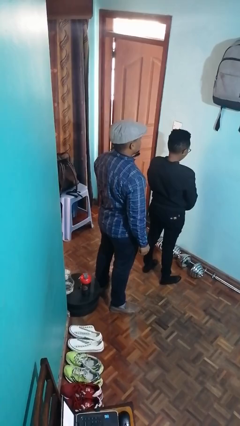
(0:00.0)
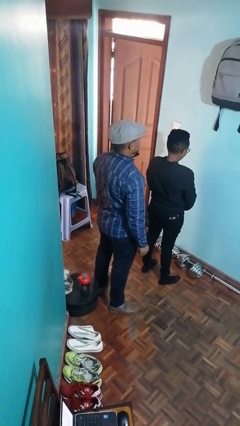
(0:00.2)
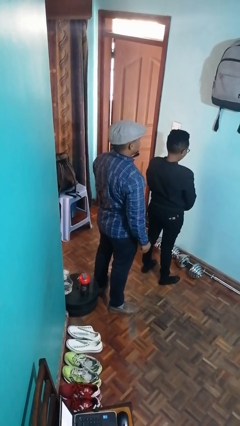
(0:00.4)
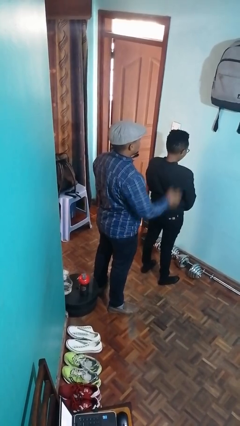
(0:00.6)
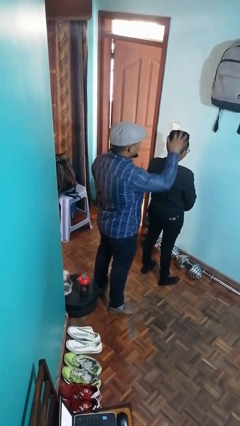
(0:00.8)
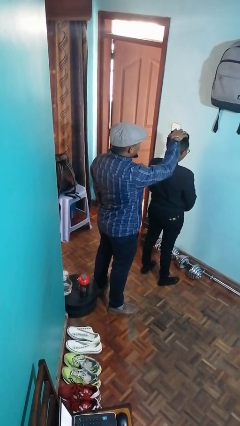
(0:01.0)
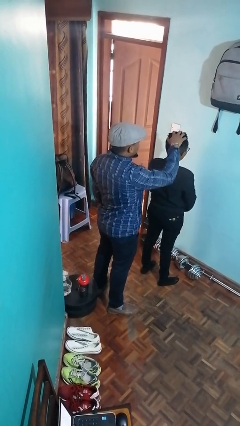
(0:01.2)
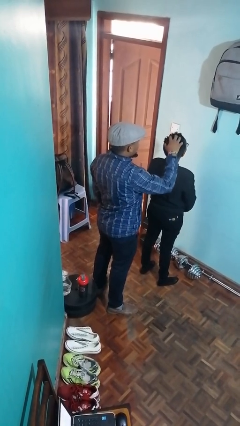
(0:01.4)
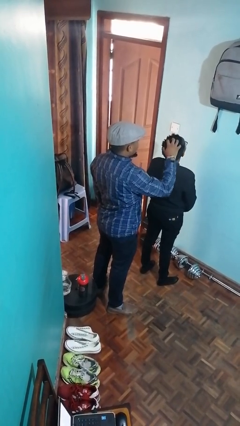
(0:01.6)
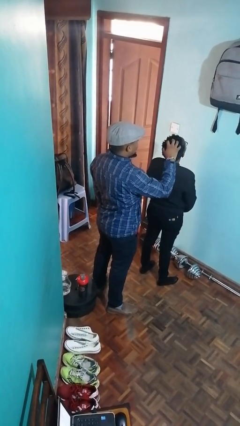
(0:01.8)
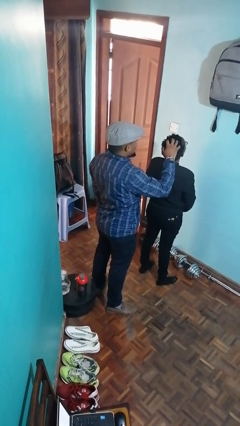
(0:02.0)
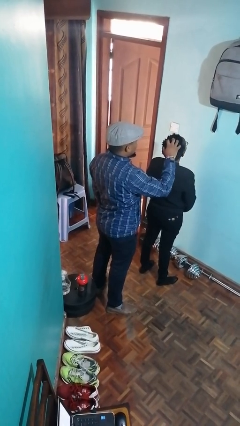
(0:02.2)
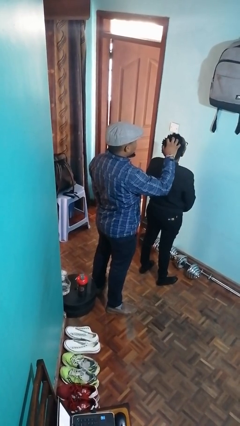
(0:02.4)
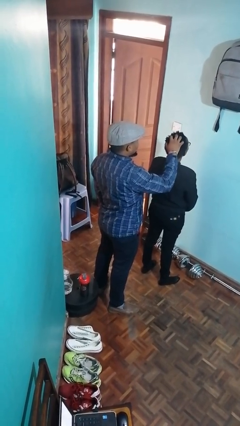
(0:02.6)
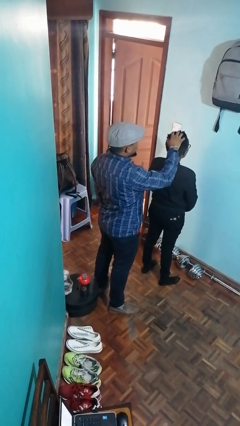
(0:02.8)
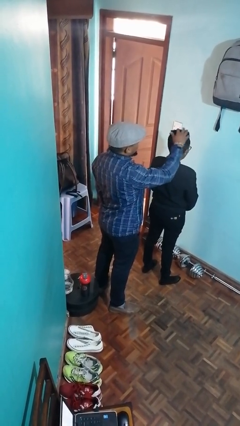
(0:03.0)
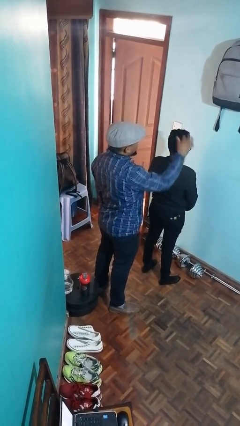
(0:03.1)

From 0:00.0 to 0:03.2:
person grabs person by hair

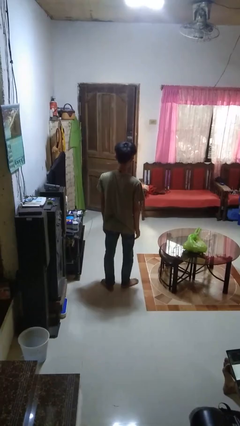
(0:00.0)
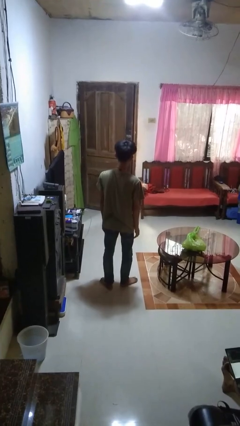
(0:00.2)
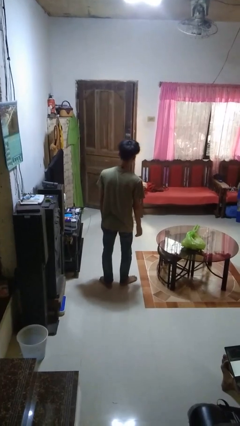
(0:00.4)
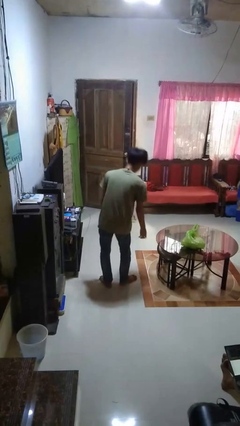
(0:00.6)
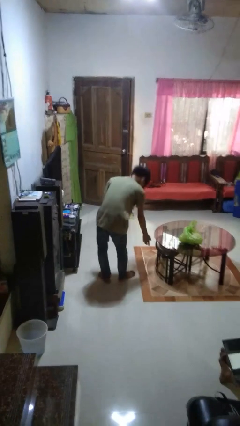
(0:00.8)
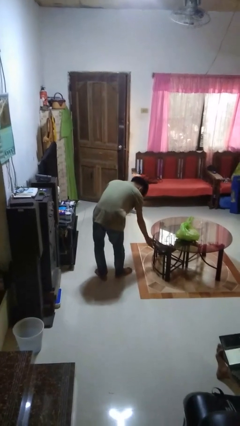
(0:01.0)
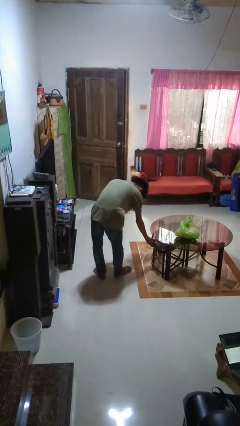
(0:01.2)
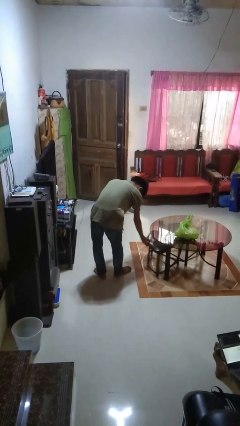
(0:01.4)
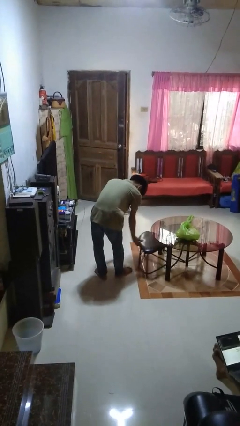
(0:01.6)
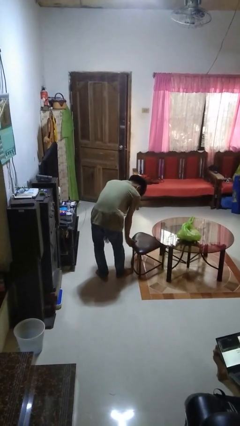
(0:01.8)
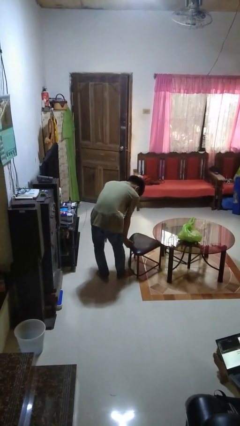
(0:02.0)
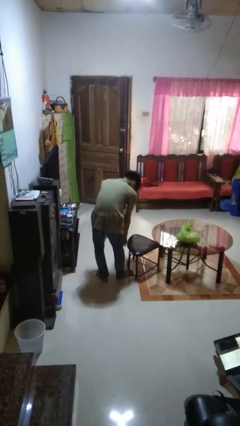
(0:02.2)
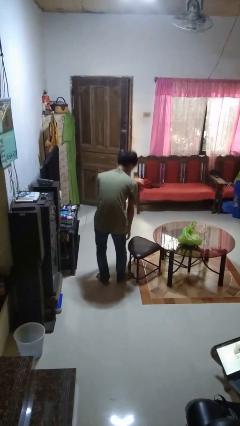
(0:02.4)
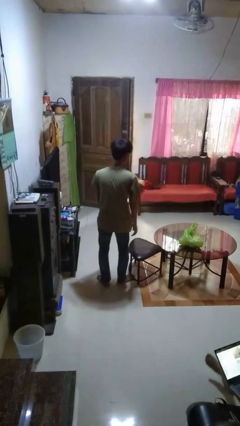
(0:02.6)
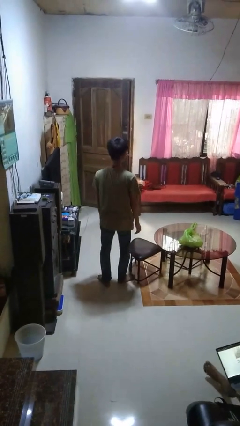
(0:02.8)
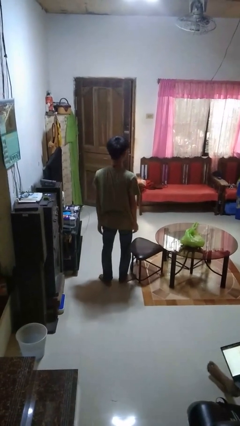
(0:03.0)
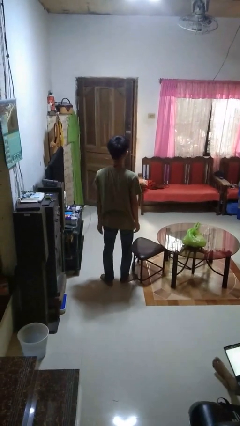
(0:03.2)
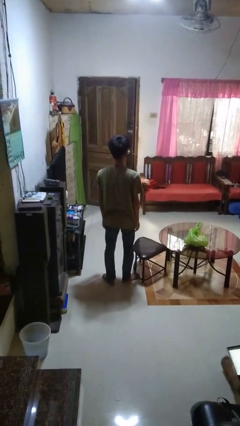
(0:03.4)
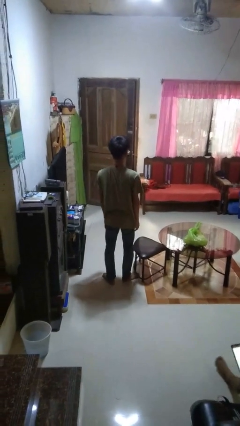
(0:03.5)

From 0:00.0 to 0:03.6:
person pulls out chair

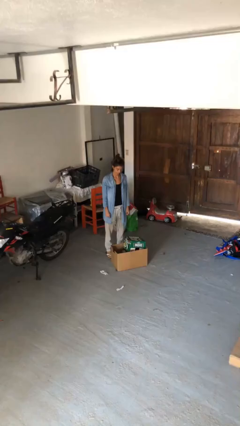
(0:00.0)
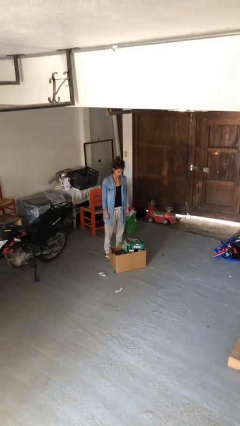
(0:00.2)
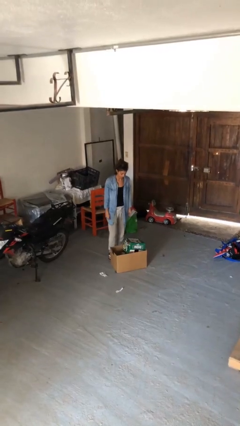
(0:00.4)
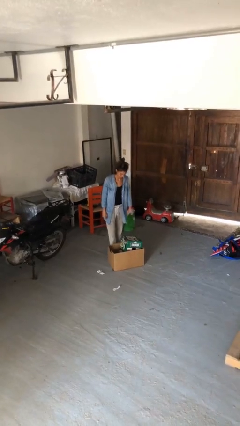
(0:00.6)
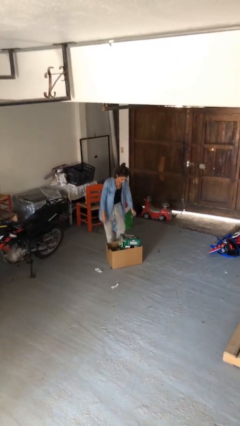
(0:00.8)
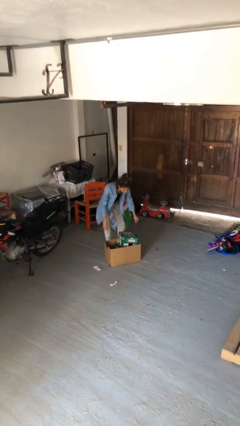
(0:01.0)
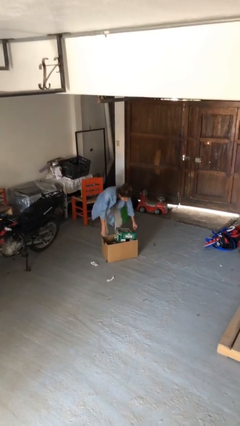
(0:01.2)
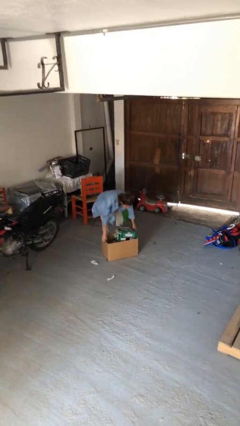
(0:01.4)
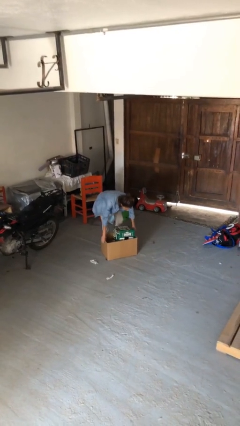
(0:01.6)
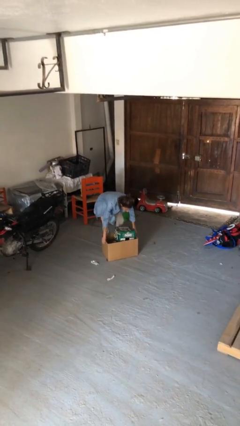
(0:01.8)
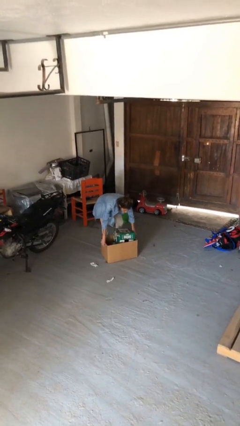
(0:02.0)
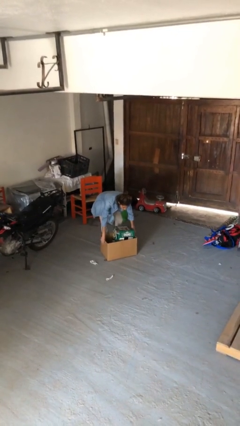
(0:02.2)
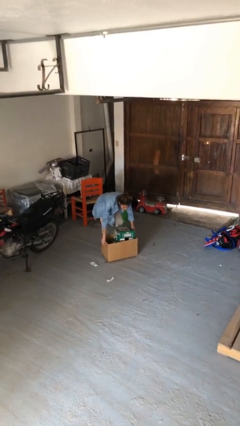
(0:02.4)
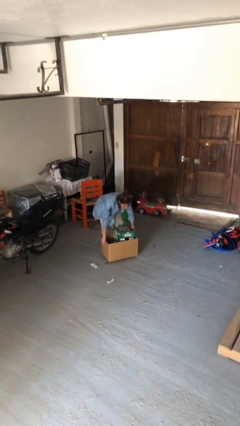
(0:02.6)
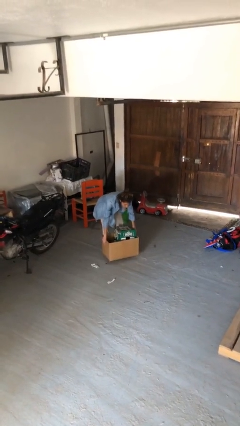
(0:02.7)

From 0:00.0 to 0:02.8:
person picks up object from floor

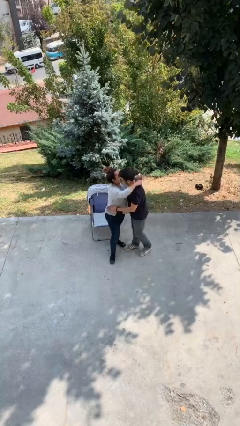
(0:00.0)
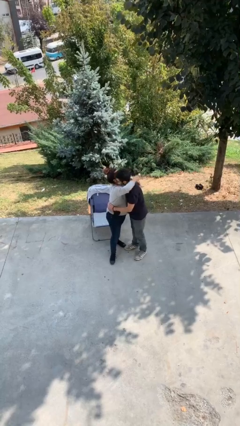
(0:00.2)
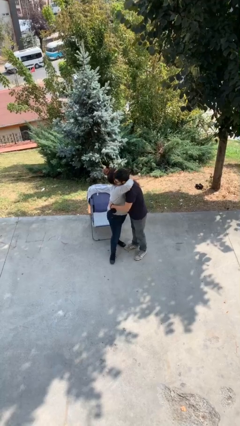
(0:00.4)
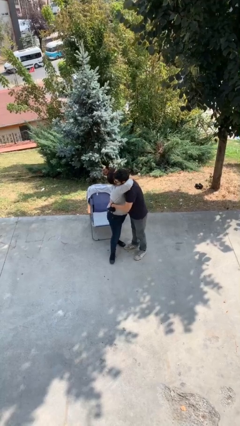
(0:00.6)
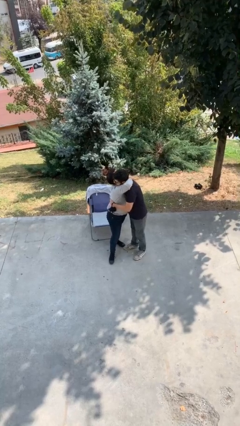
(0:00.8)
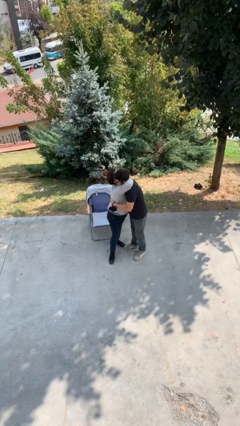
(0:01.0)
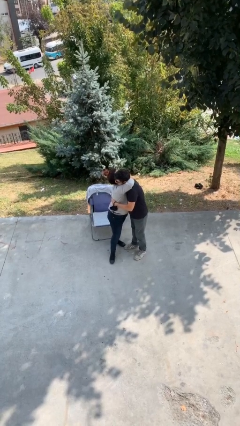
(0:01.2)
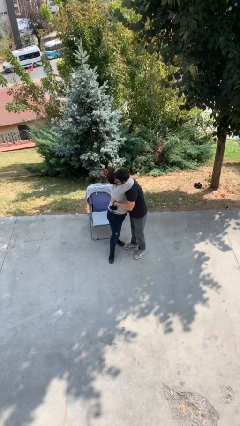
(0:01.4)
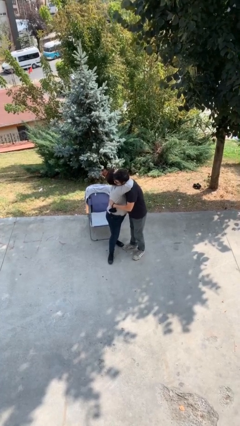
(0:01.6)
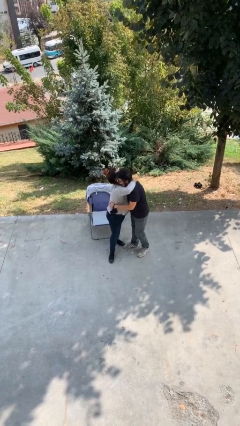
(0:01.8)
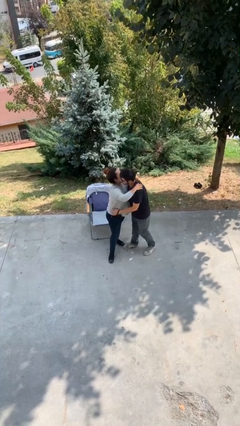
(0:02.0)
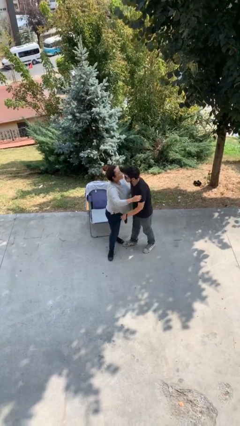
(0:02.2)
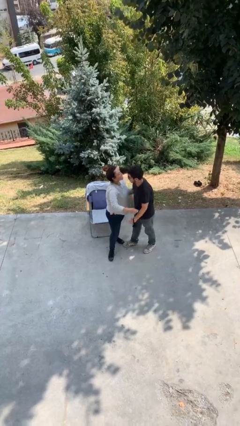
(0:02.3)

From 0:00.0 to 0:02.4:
person embraces person

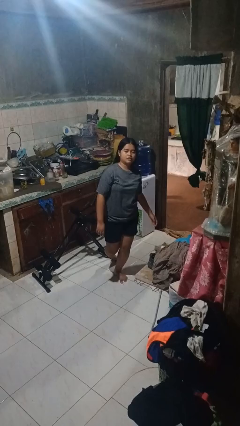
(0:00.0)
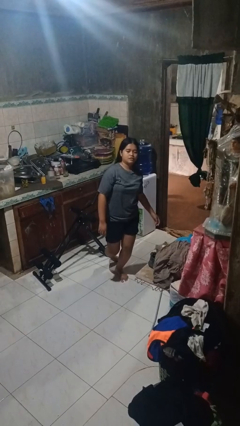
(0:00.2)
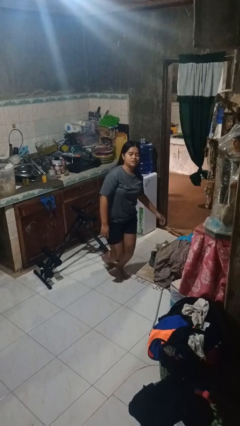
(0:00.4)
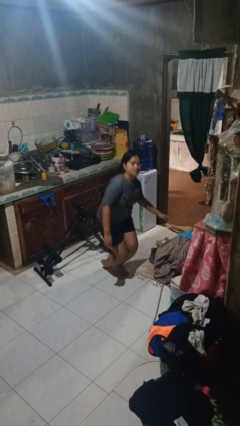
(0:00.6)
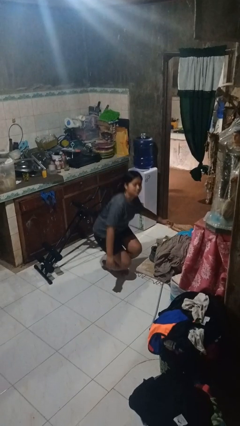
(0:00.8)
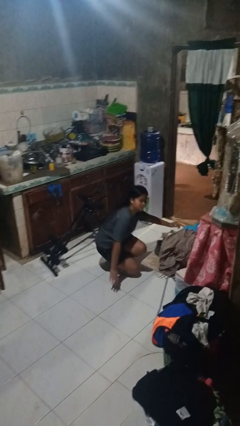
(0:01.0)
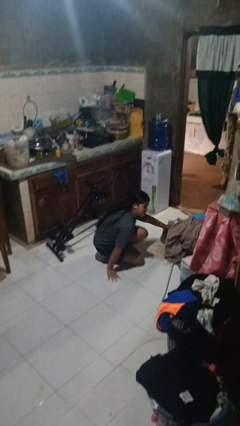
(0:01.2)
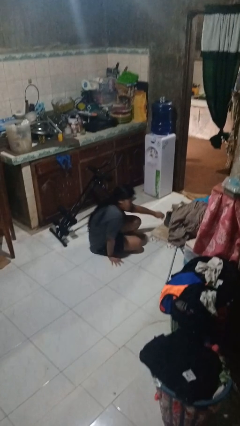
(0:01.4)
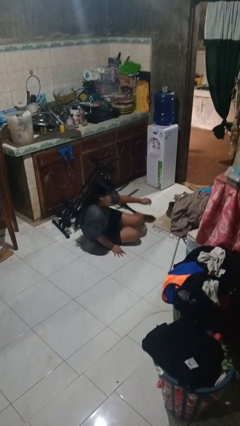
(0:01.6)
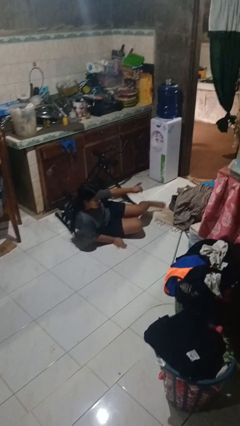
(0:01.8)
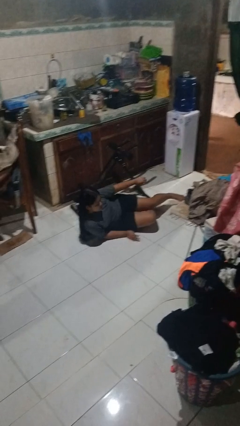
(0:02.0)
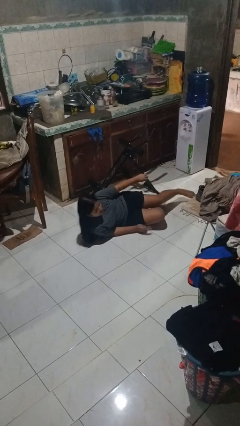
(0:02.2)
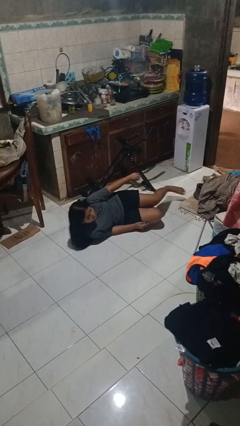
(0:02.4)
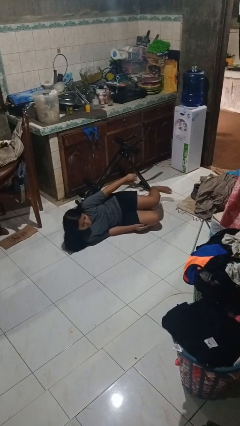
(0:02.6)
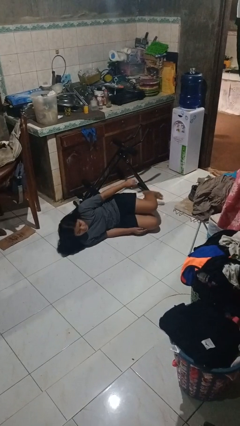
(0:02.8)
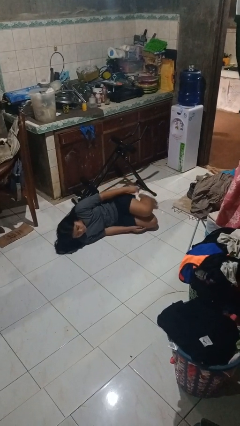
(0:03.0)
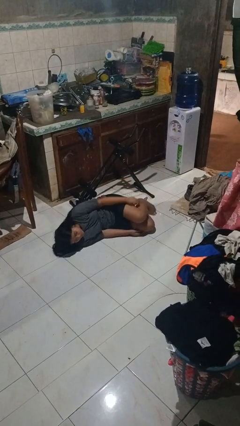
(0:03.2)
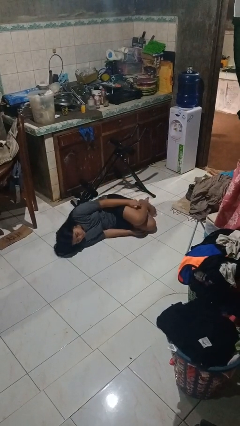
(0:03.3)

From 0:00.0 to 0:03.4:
person lies down on floor

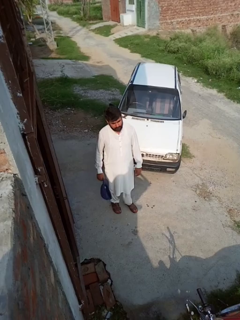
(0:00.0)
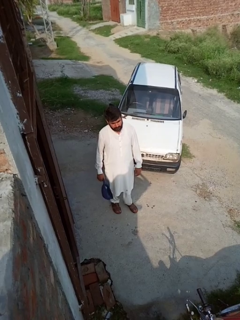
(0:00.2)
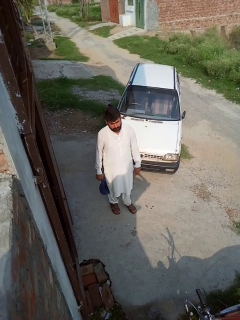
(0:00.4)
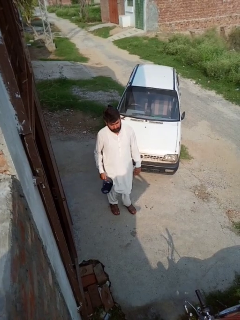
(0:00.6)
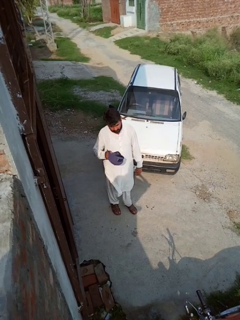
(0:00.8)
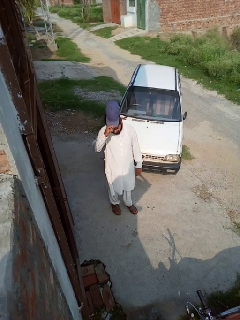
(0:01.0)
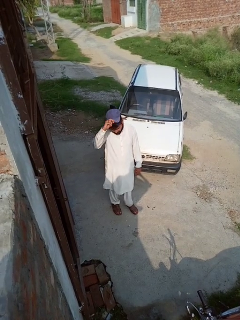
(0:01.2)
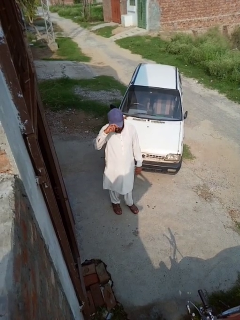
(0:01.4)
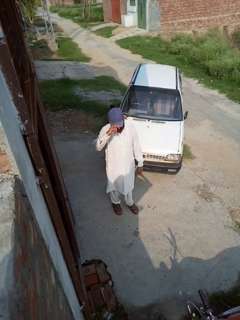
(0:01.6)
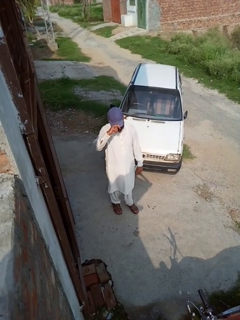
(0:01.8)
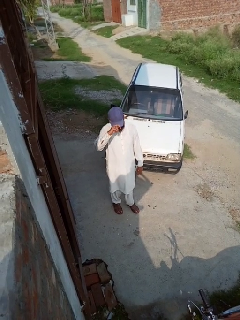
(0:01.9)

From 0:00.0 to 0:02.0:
person puts on hat

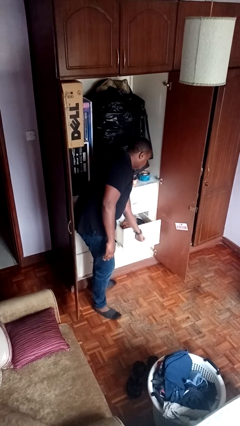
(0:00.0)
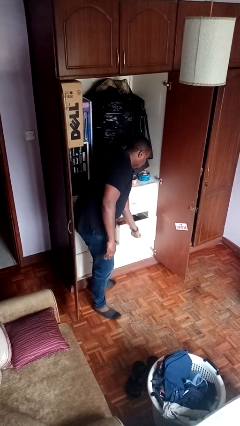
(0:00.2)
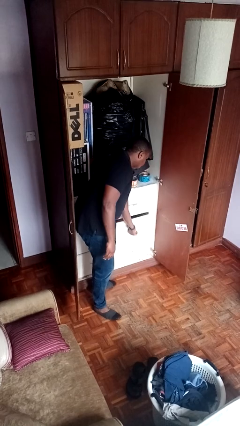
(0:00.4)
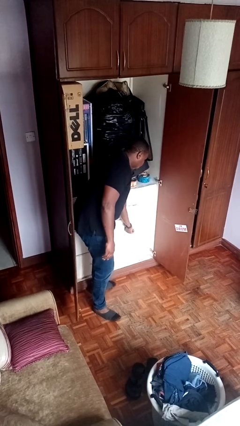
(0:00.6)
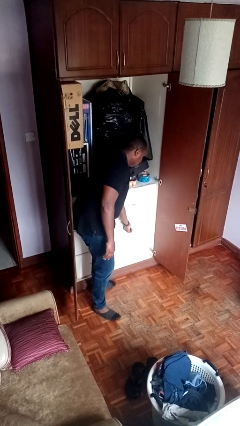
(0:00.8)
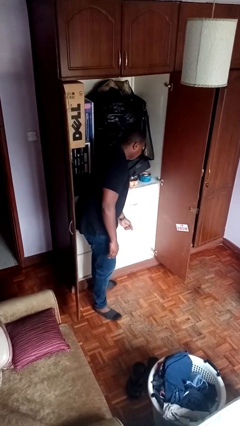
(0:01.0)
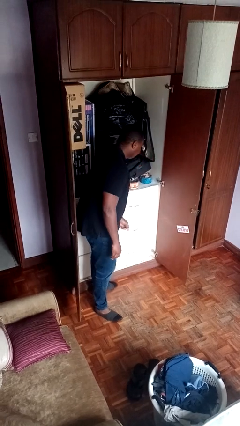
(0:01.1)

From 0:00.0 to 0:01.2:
person closes dresser drawer
